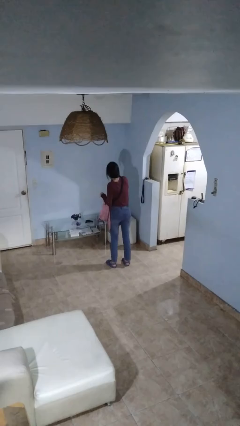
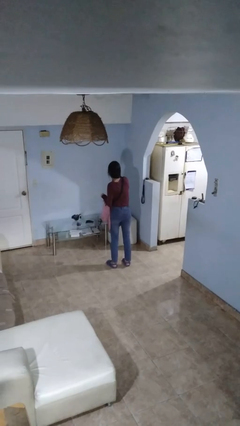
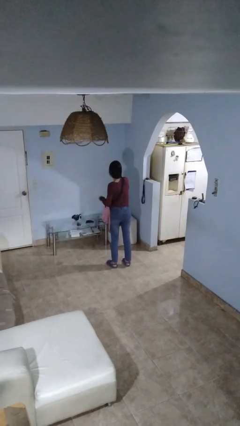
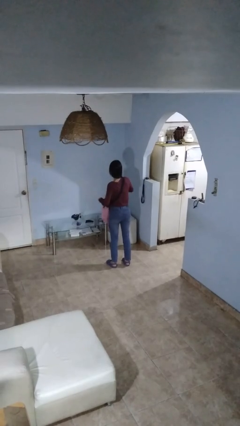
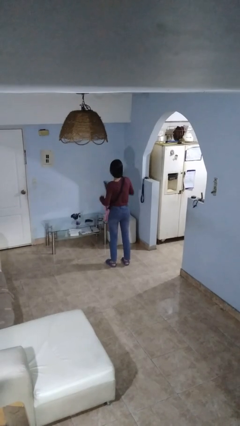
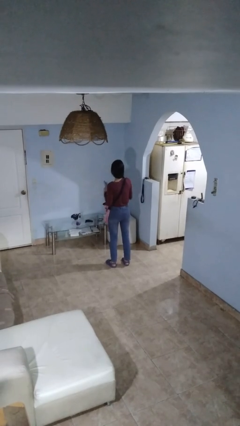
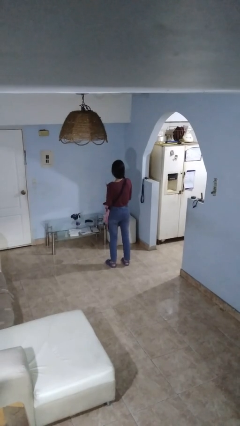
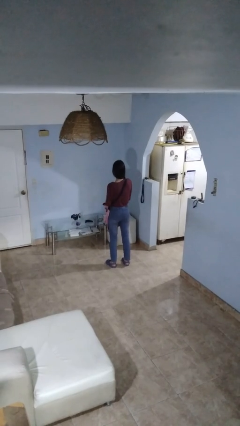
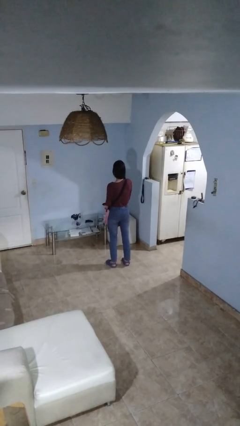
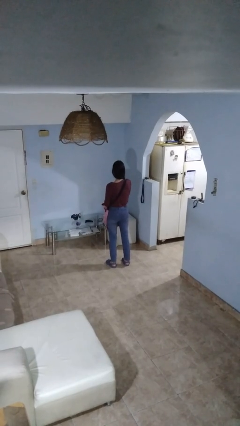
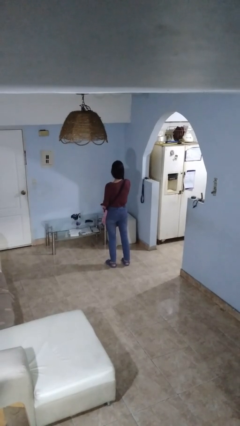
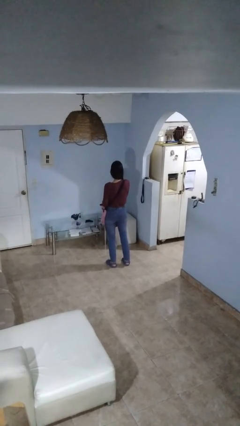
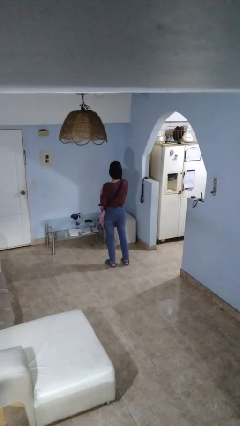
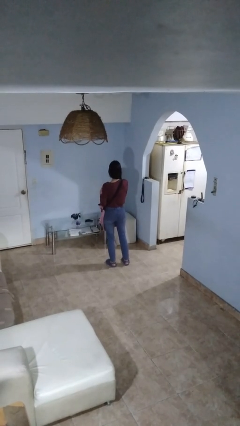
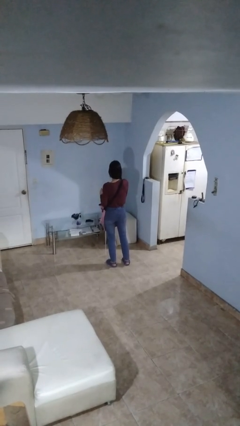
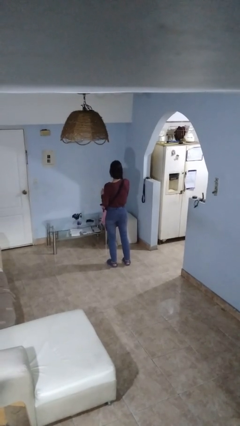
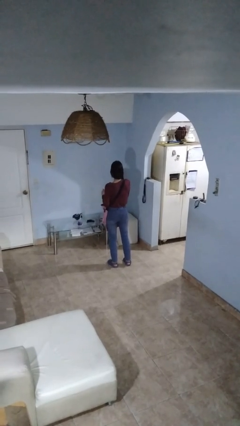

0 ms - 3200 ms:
person takes object from backpack

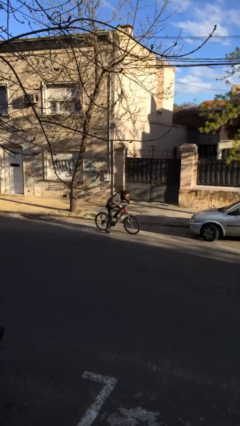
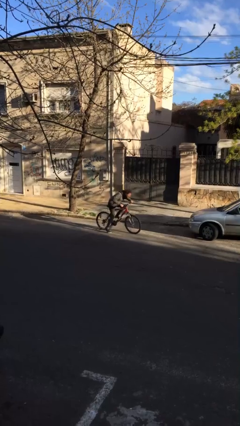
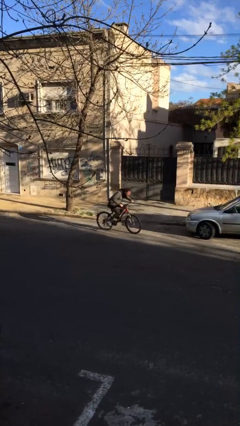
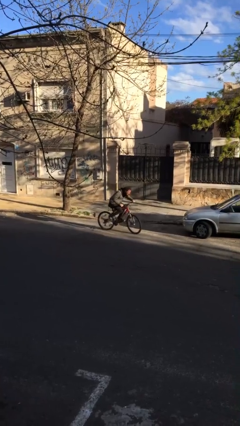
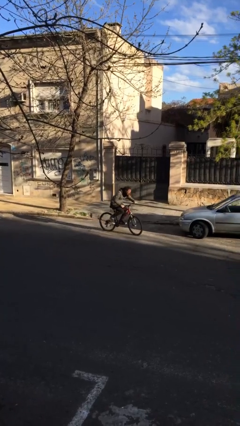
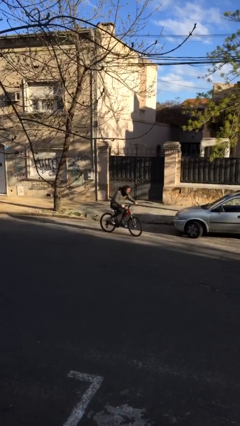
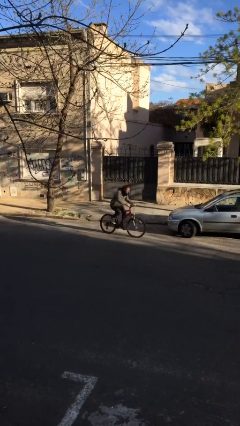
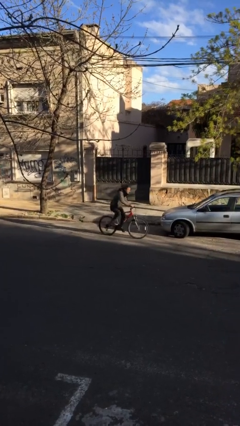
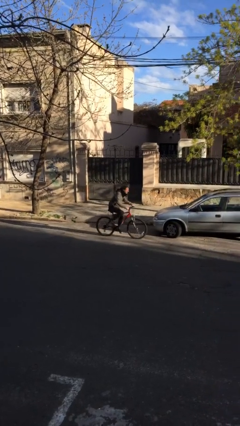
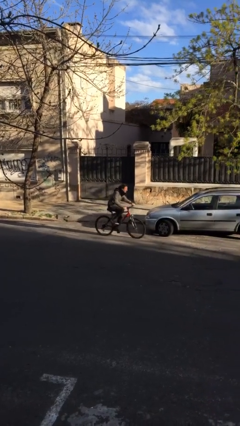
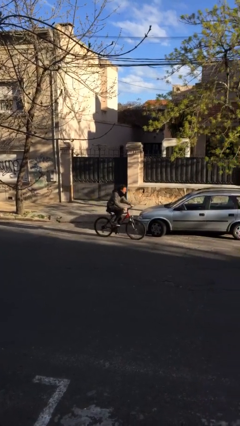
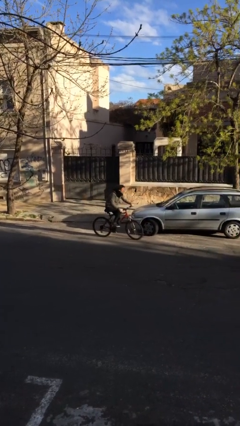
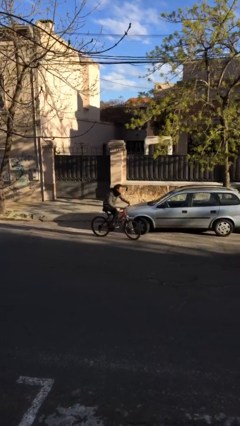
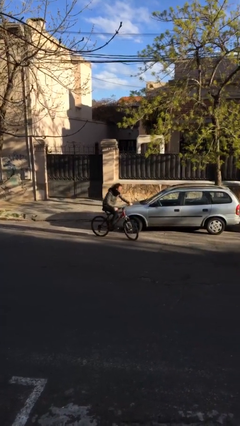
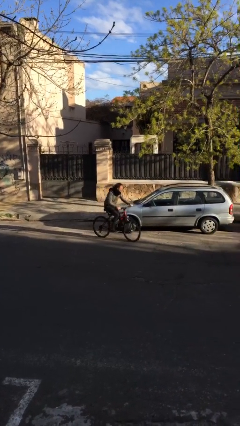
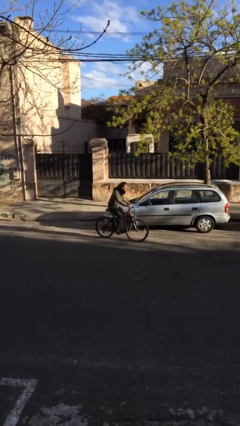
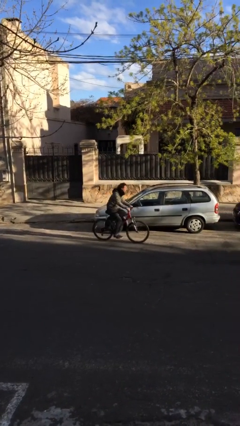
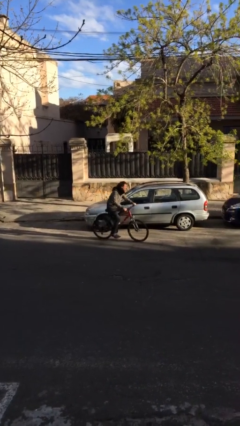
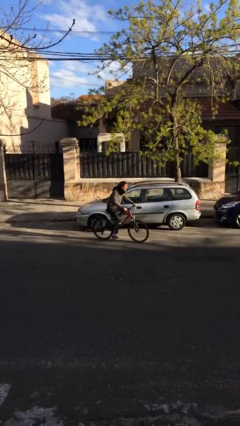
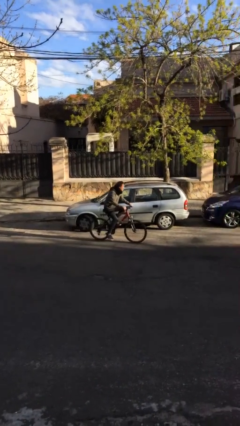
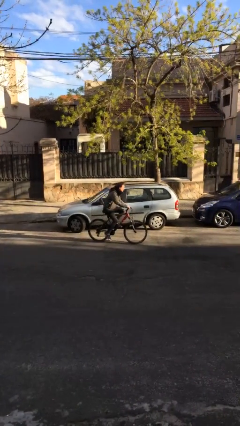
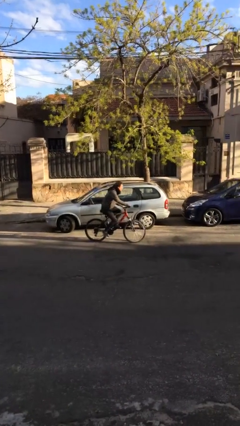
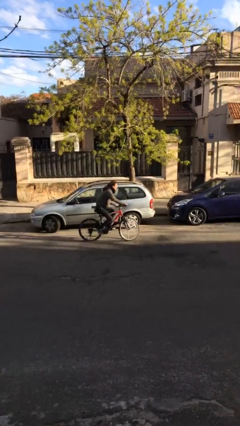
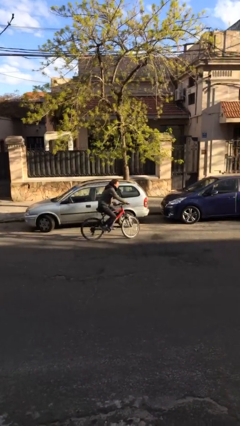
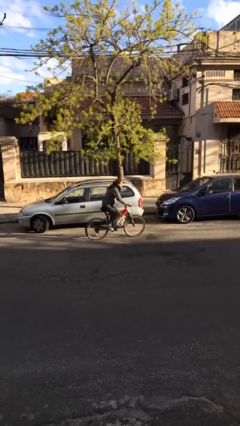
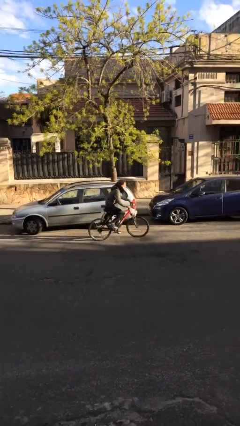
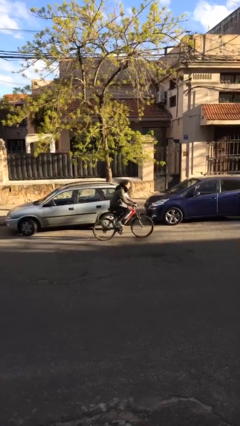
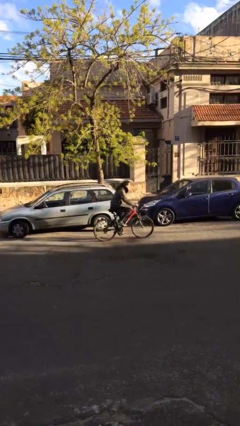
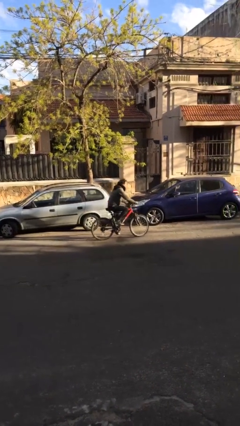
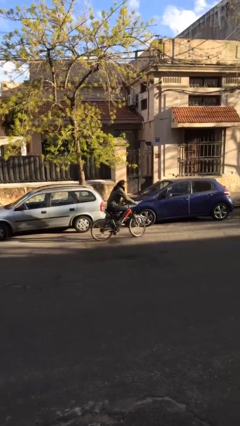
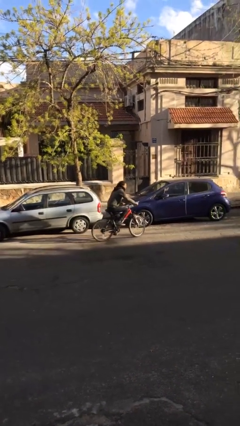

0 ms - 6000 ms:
person rides bicycle

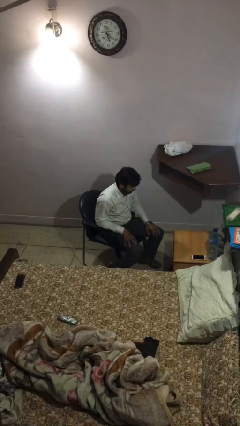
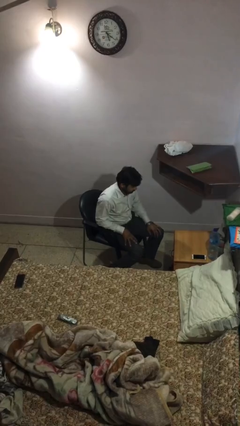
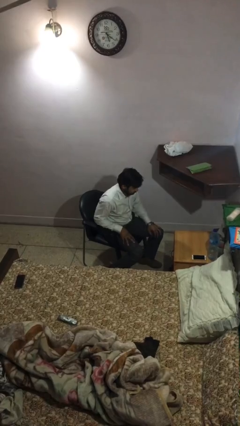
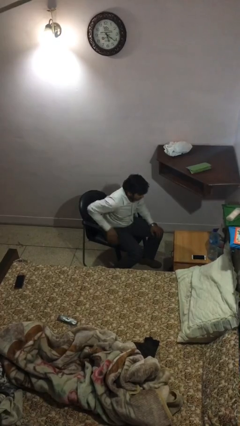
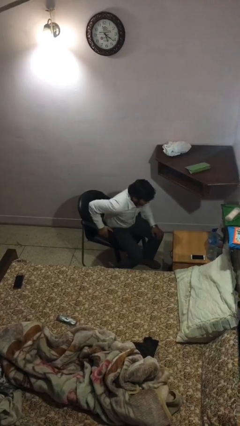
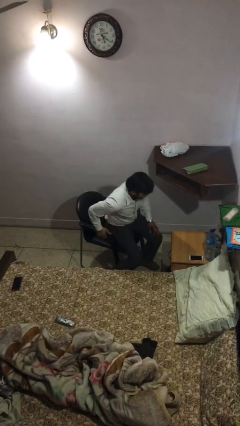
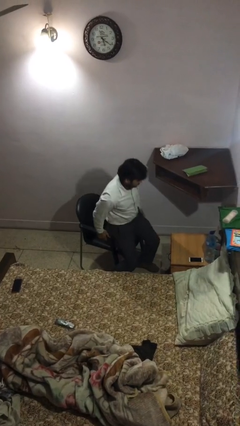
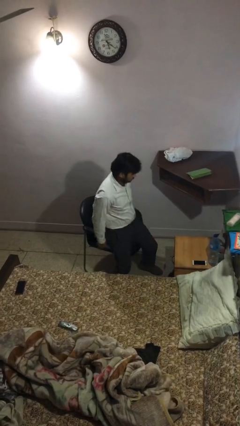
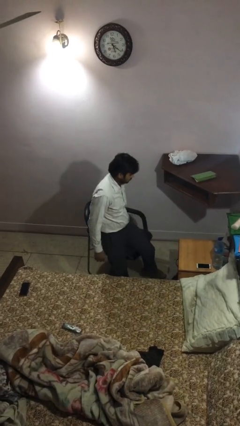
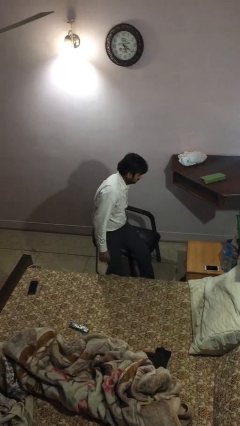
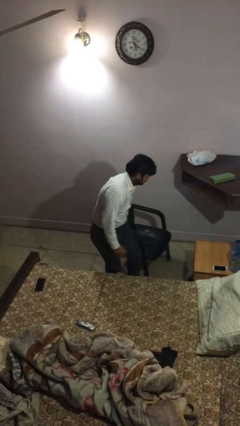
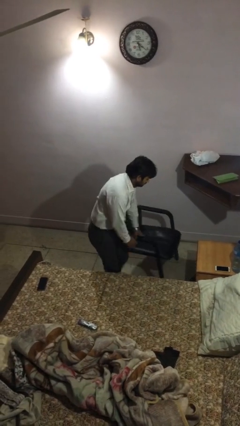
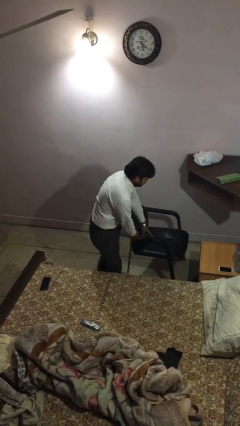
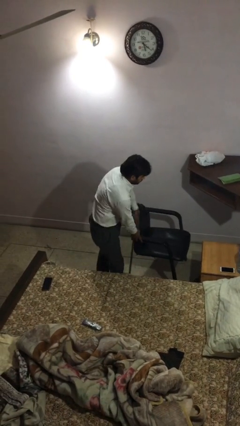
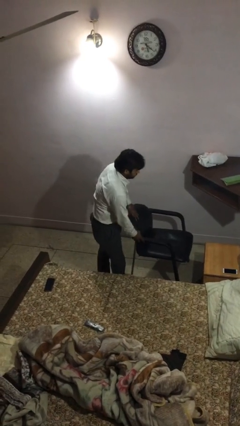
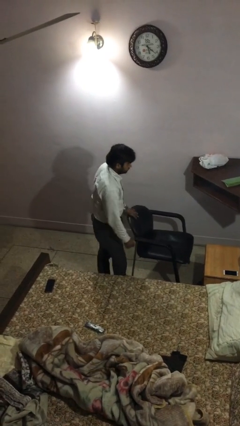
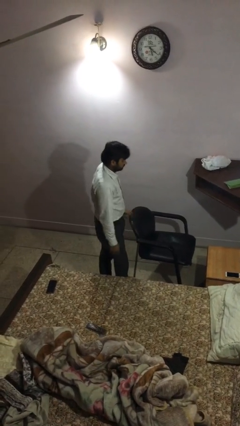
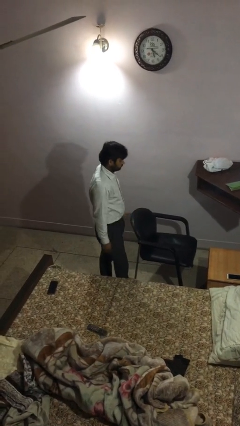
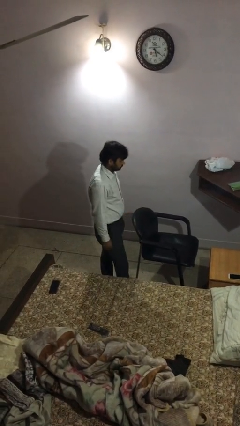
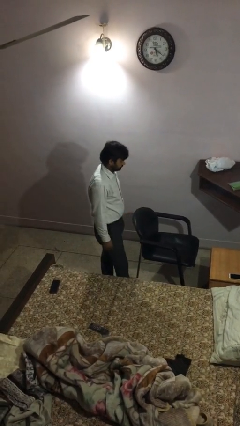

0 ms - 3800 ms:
person stands up

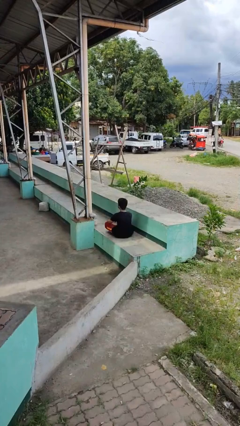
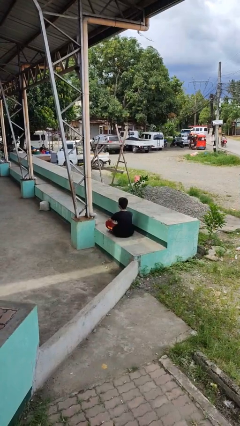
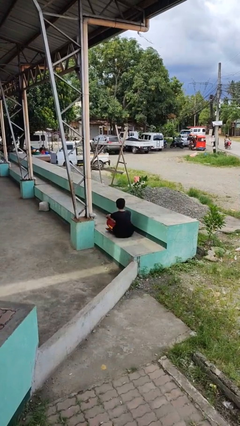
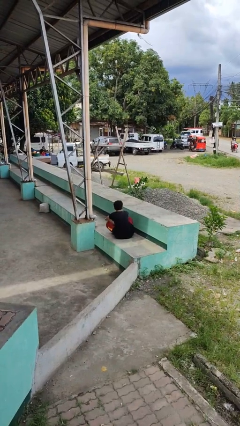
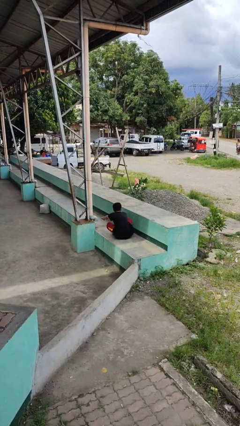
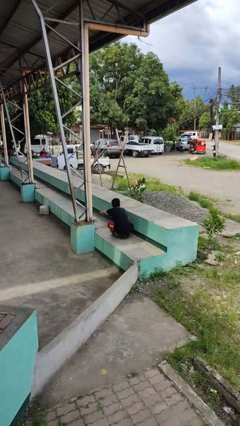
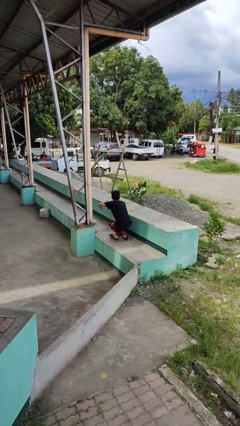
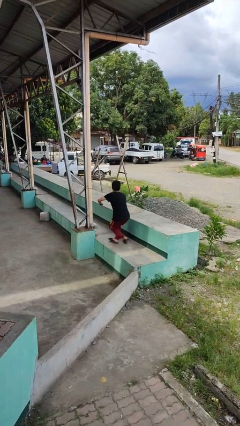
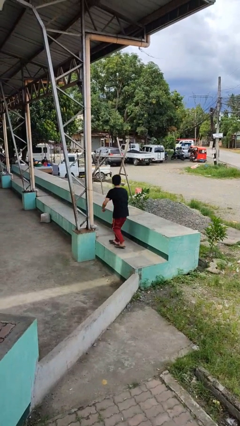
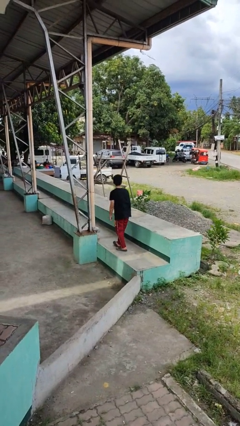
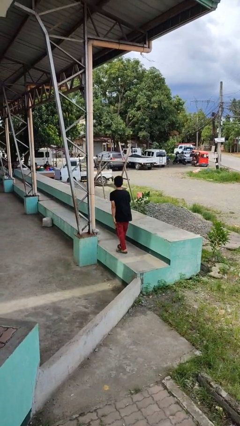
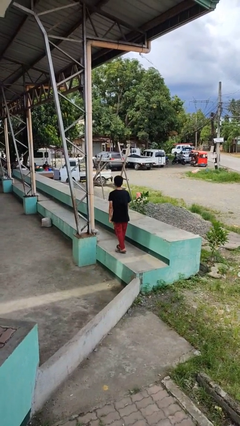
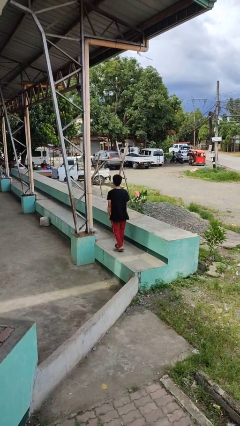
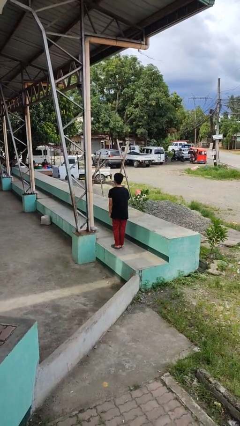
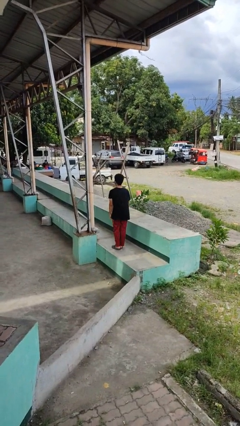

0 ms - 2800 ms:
person stands up from floor

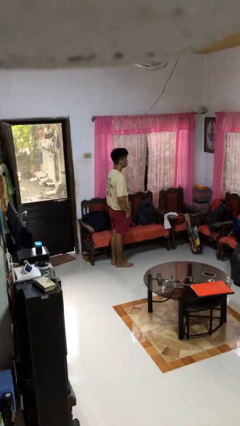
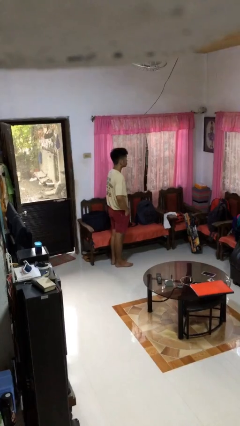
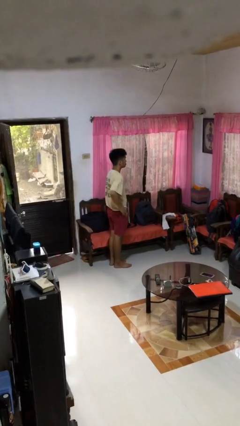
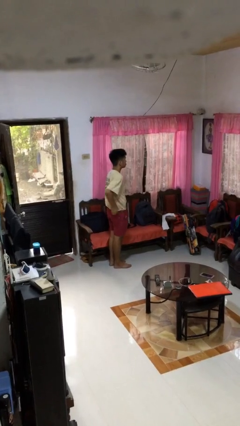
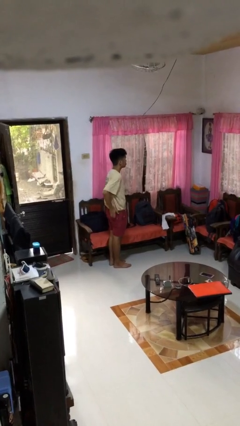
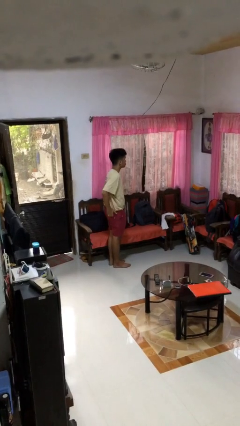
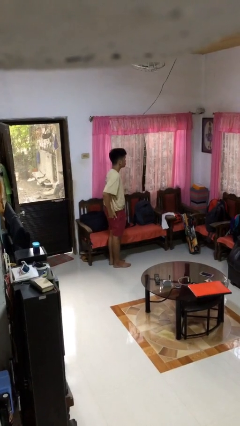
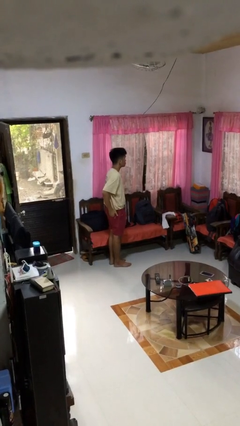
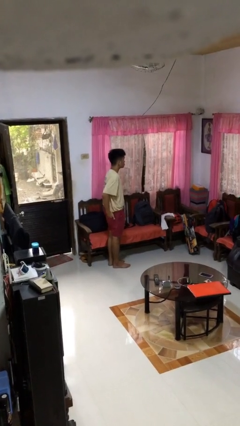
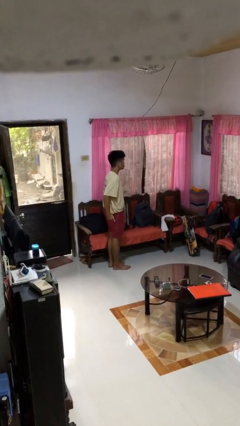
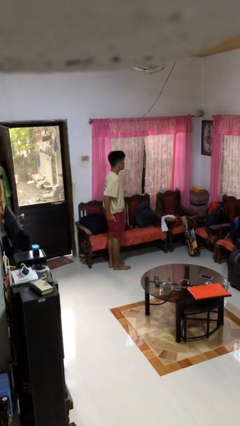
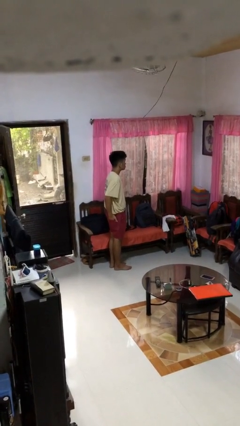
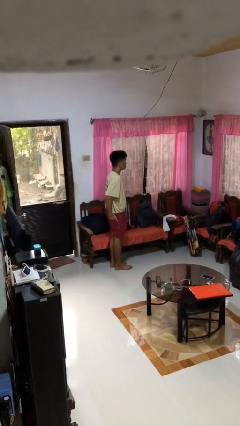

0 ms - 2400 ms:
person puts hands in back pockets
